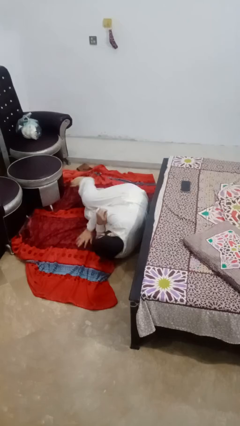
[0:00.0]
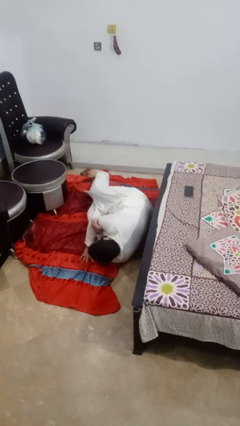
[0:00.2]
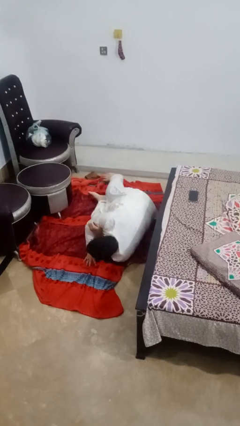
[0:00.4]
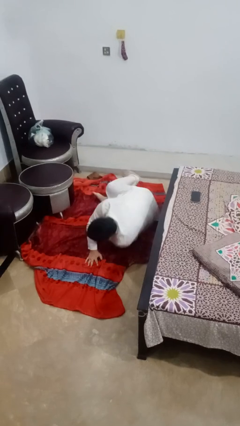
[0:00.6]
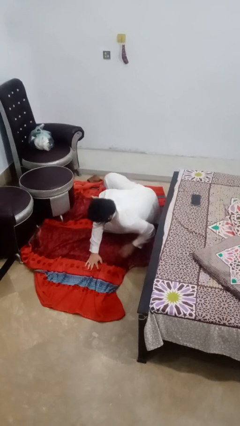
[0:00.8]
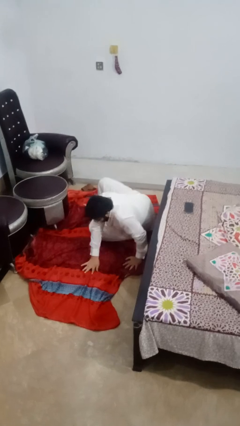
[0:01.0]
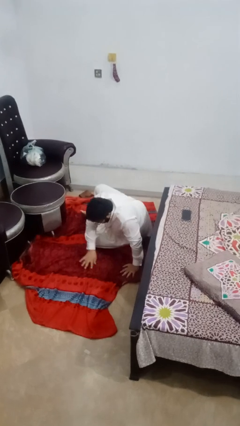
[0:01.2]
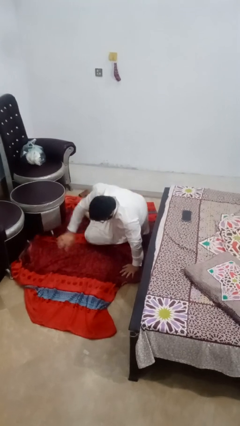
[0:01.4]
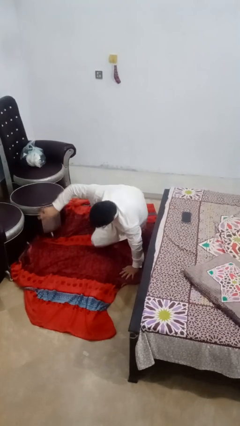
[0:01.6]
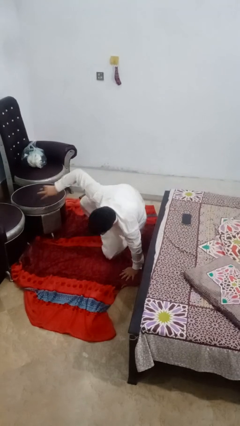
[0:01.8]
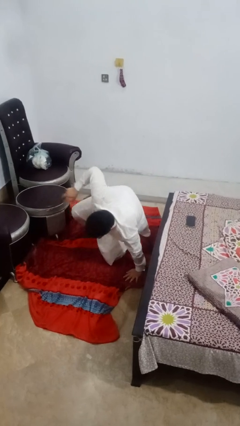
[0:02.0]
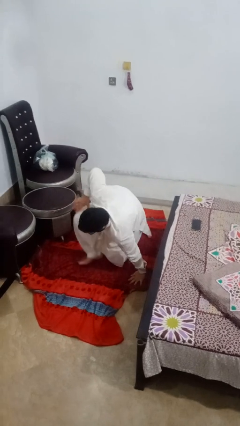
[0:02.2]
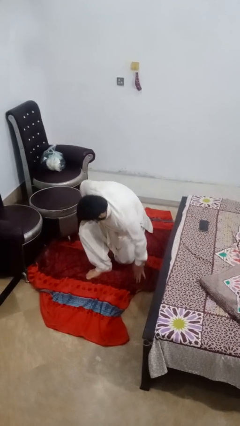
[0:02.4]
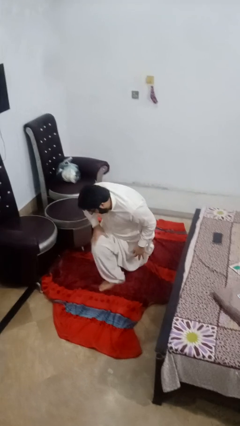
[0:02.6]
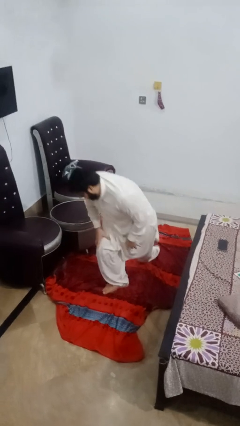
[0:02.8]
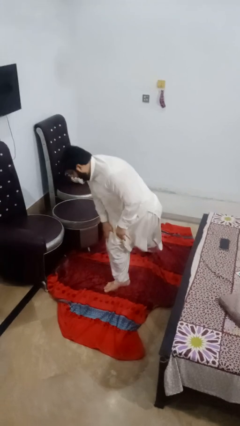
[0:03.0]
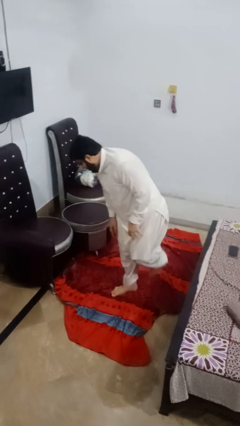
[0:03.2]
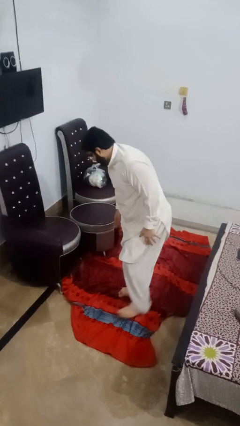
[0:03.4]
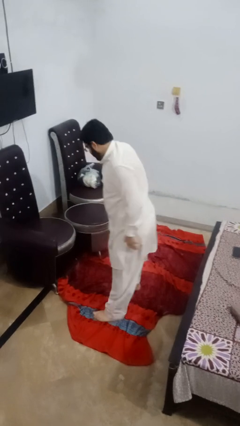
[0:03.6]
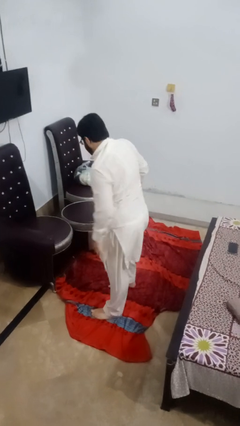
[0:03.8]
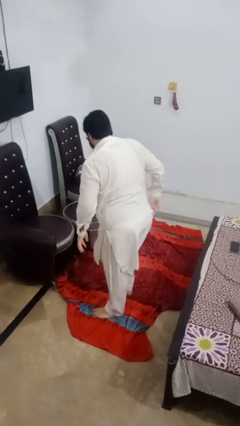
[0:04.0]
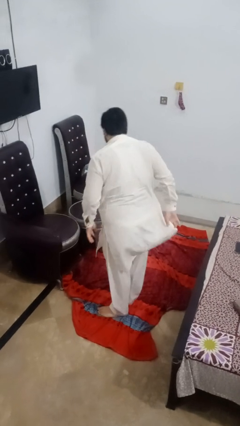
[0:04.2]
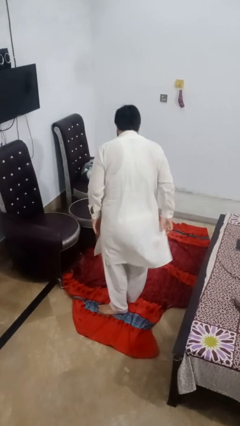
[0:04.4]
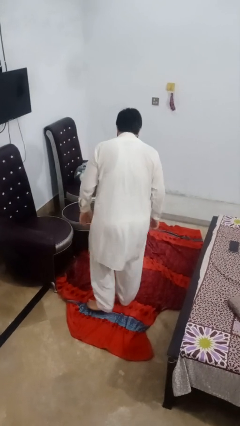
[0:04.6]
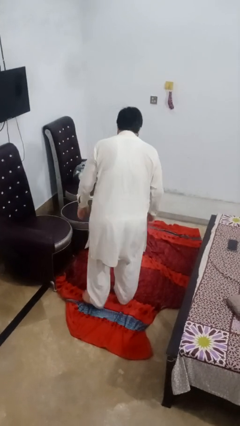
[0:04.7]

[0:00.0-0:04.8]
person stands up from floor

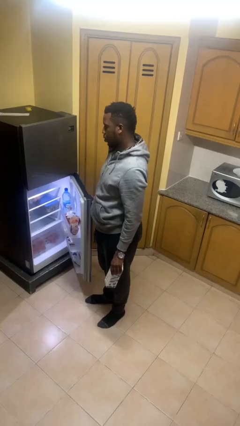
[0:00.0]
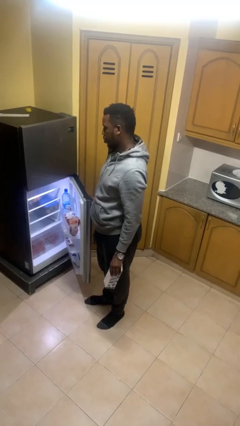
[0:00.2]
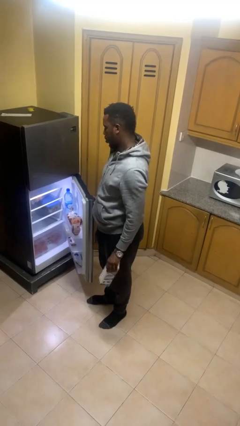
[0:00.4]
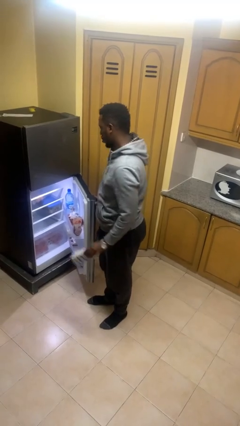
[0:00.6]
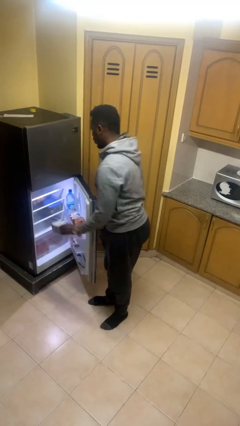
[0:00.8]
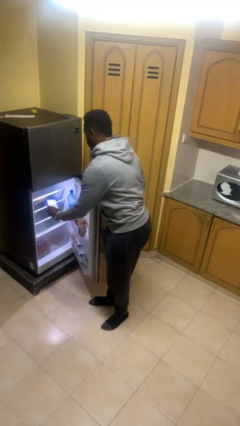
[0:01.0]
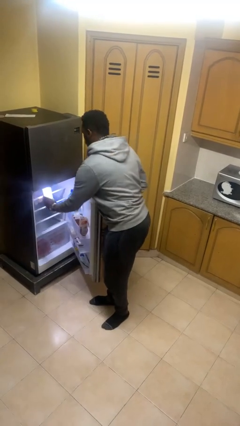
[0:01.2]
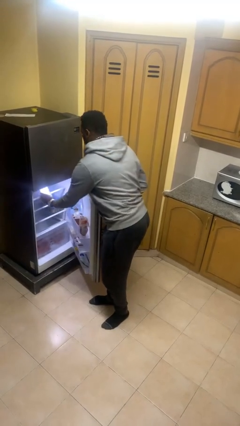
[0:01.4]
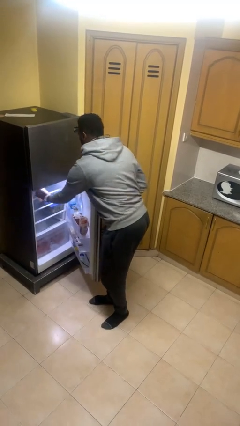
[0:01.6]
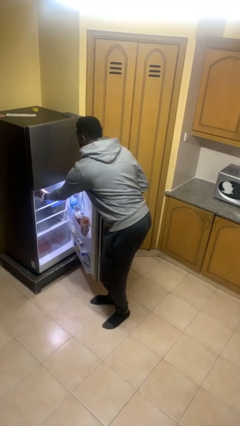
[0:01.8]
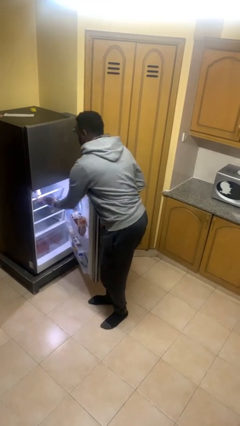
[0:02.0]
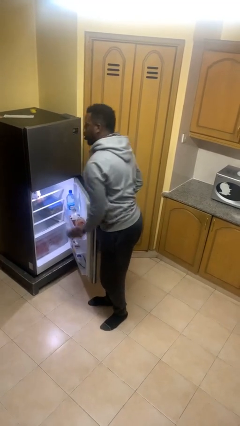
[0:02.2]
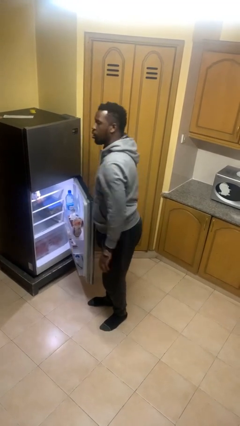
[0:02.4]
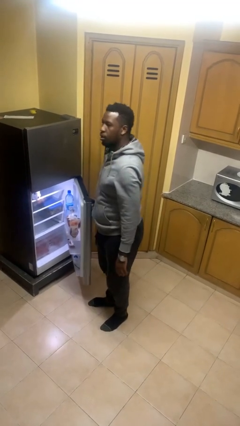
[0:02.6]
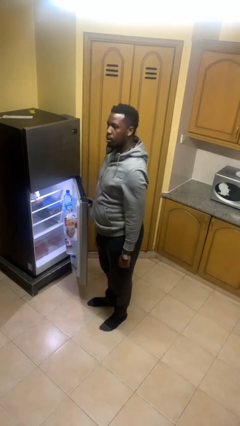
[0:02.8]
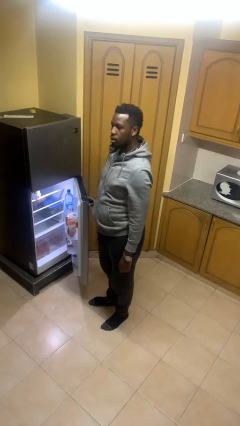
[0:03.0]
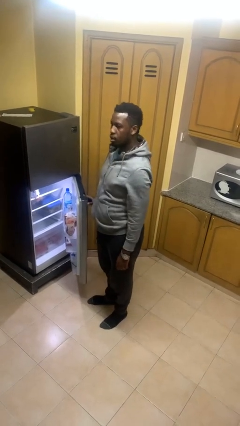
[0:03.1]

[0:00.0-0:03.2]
person puts object into refrigerator

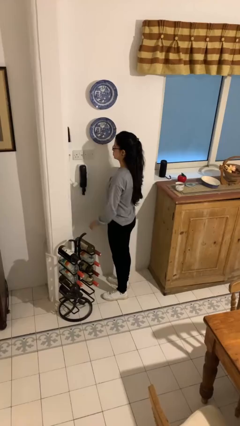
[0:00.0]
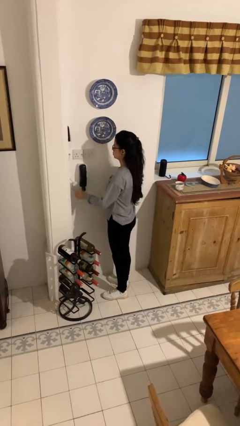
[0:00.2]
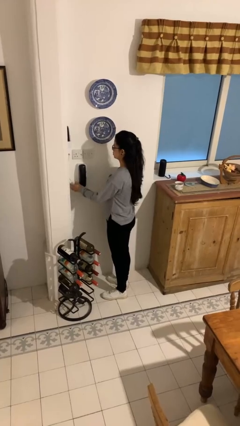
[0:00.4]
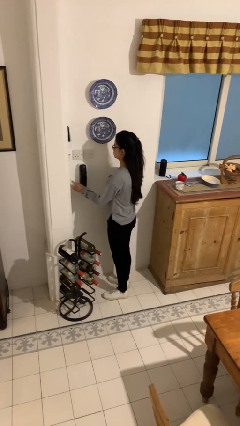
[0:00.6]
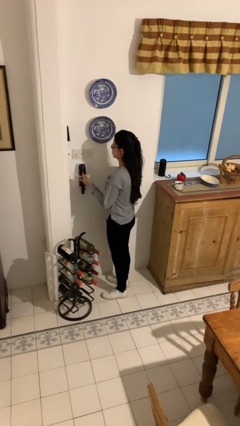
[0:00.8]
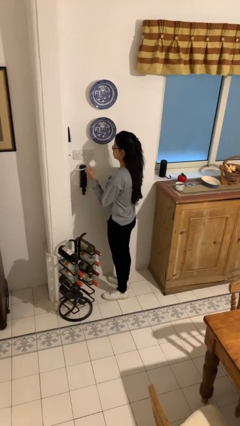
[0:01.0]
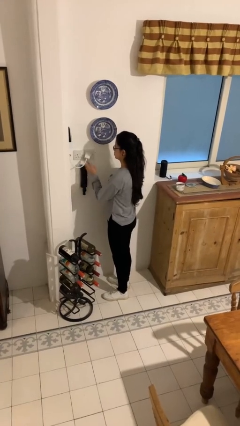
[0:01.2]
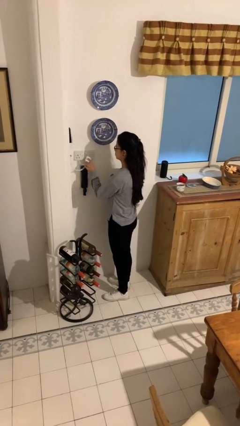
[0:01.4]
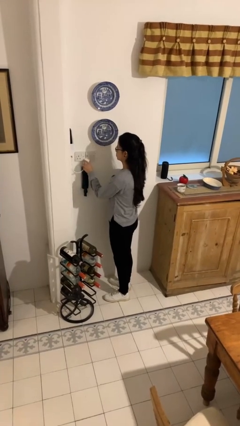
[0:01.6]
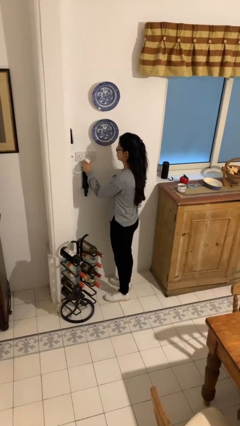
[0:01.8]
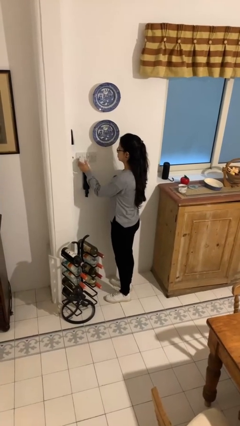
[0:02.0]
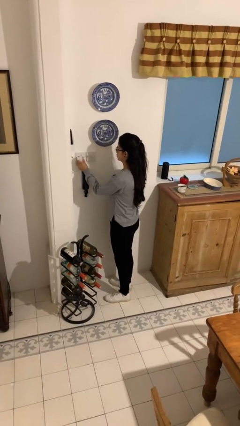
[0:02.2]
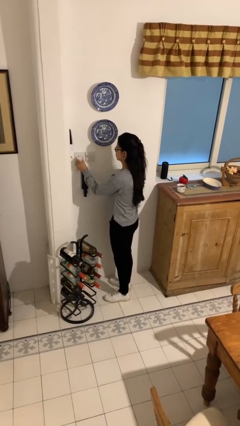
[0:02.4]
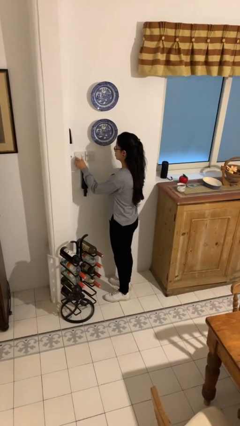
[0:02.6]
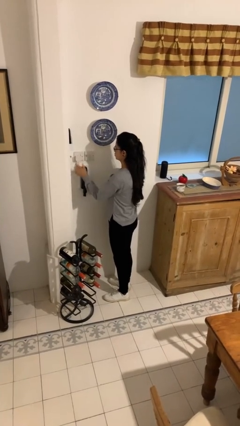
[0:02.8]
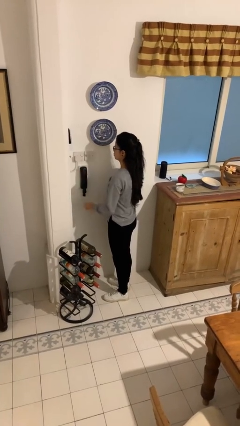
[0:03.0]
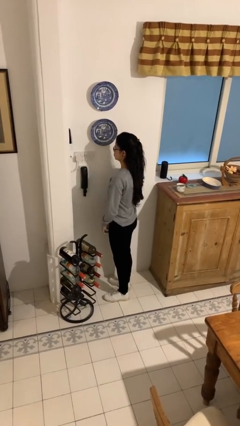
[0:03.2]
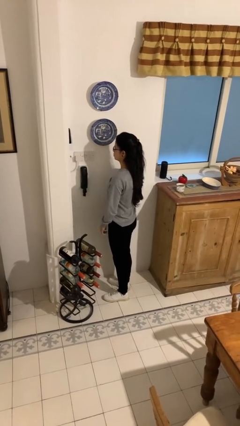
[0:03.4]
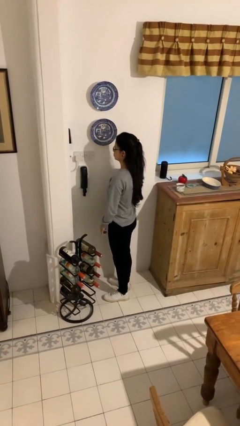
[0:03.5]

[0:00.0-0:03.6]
person plugs into electrical socket

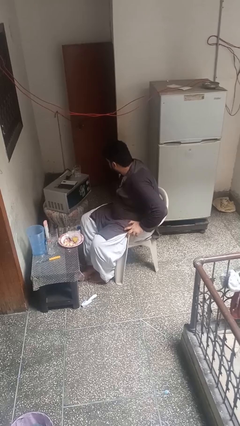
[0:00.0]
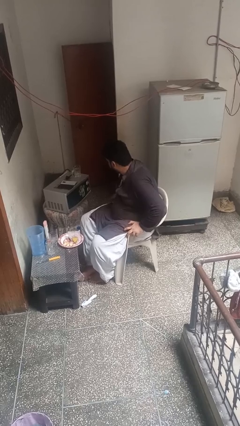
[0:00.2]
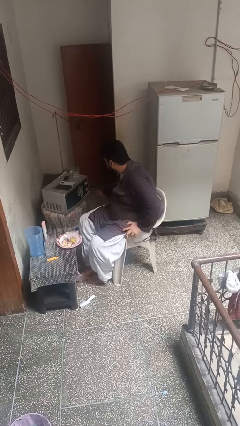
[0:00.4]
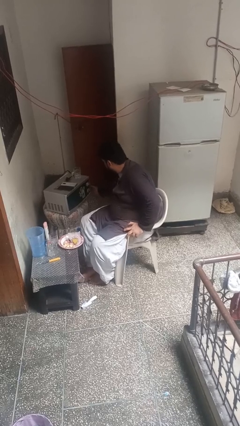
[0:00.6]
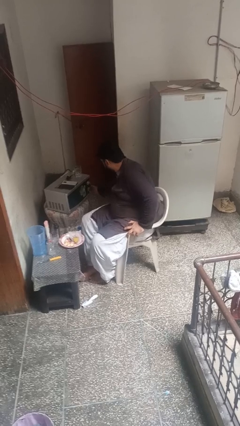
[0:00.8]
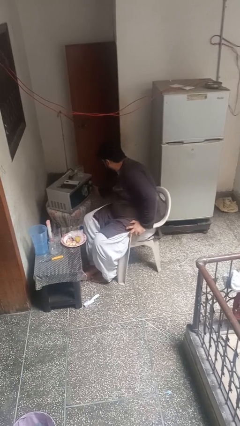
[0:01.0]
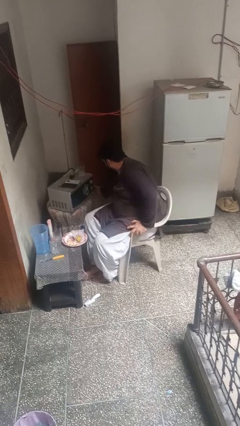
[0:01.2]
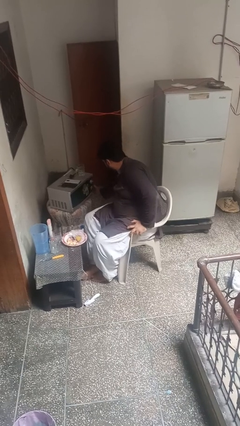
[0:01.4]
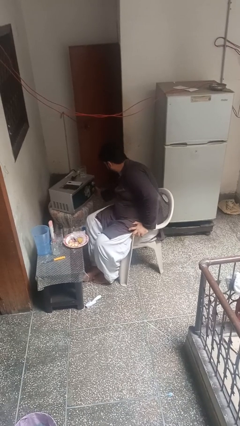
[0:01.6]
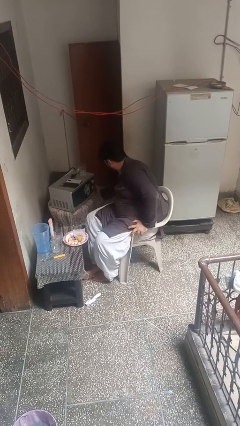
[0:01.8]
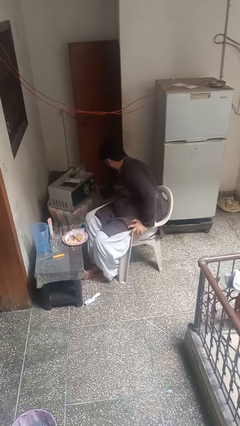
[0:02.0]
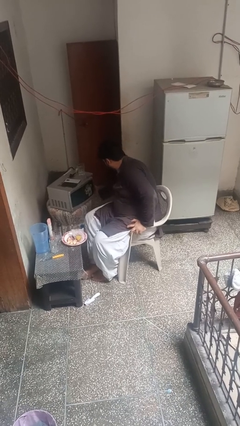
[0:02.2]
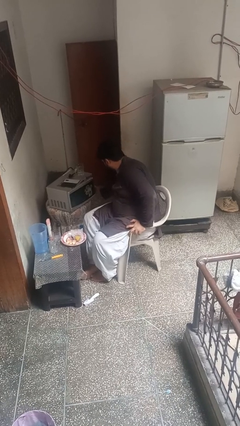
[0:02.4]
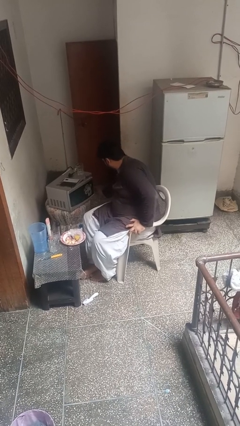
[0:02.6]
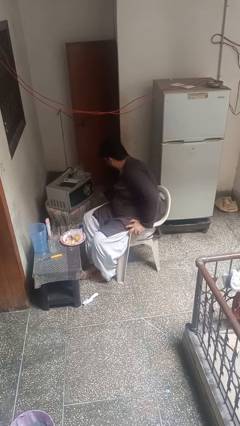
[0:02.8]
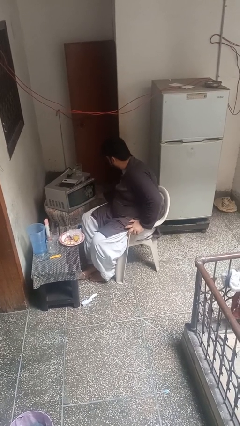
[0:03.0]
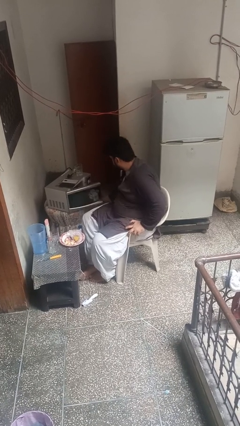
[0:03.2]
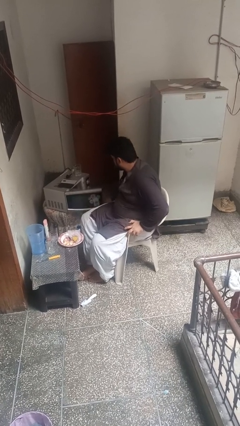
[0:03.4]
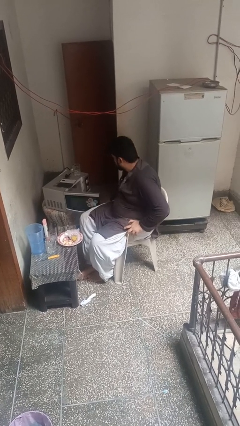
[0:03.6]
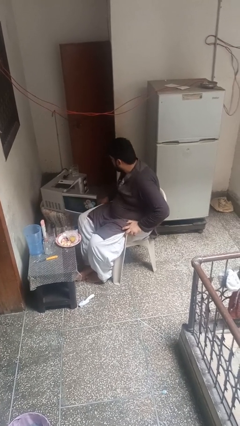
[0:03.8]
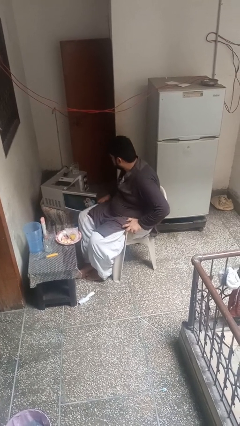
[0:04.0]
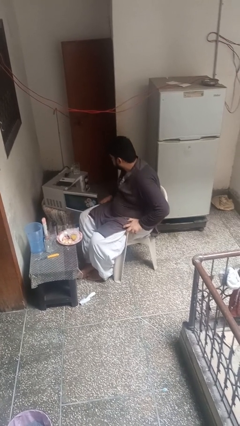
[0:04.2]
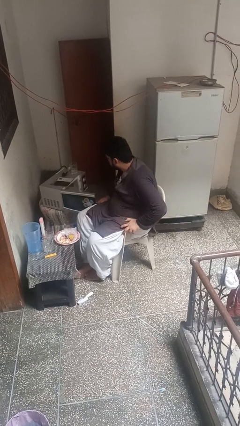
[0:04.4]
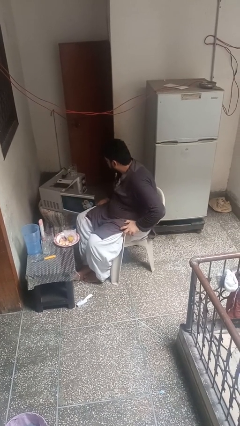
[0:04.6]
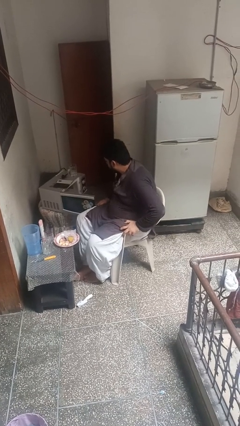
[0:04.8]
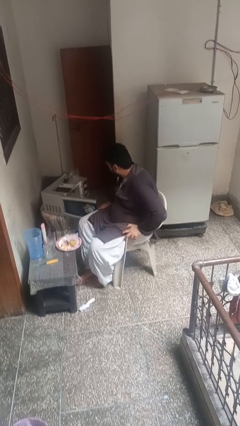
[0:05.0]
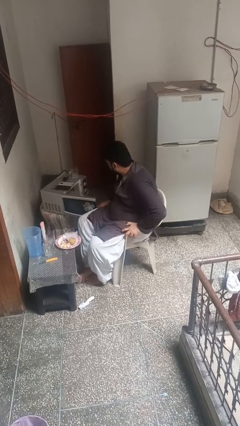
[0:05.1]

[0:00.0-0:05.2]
person opens microwave

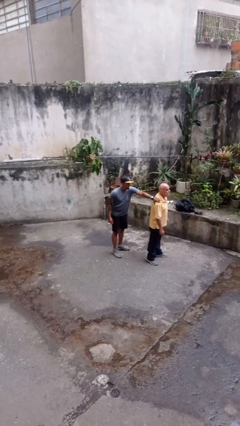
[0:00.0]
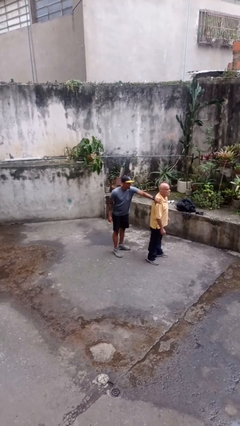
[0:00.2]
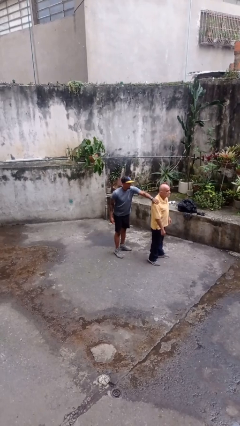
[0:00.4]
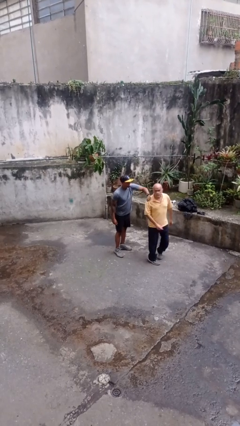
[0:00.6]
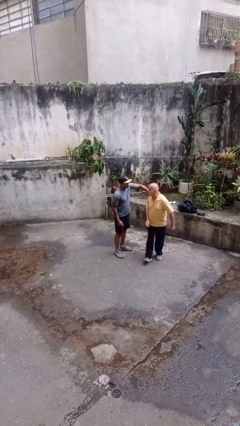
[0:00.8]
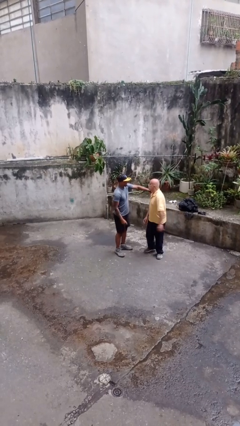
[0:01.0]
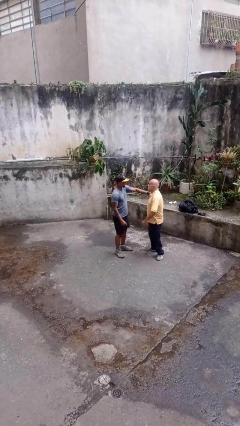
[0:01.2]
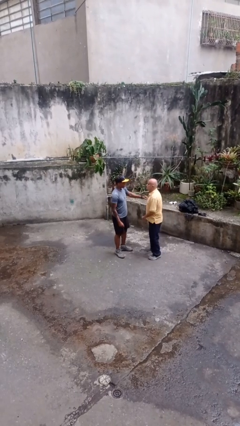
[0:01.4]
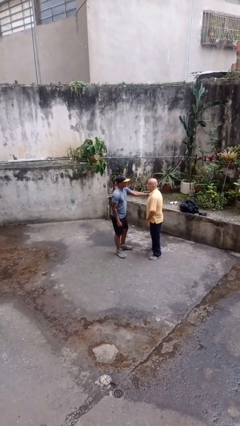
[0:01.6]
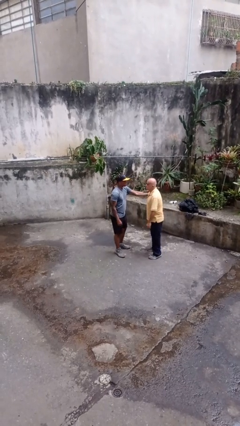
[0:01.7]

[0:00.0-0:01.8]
person spins person around
